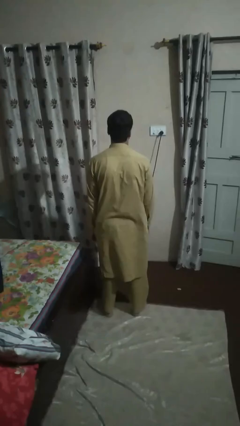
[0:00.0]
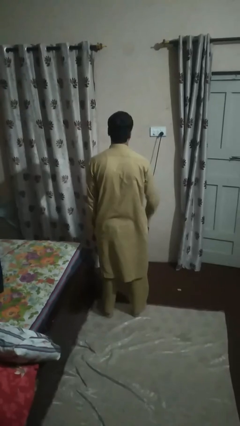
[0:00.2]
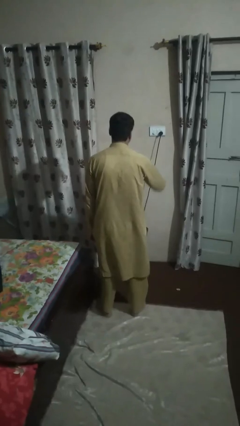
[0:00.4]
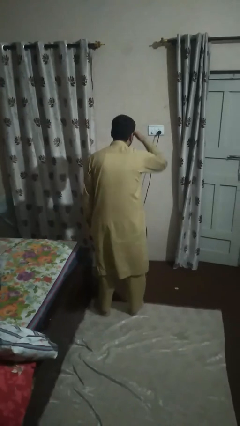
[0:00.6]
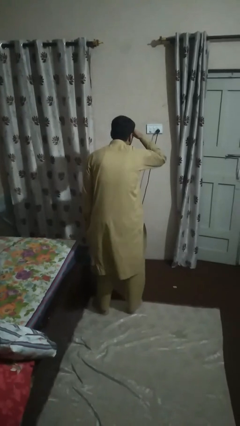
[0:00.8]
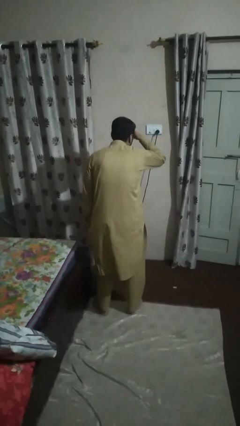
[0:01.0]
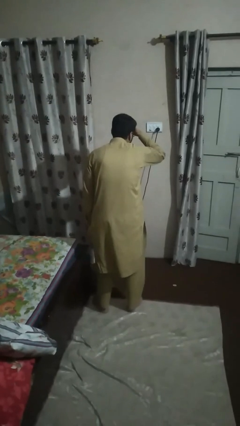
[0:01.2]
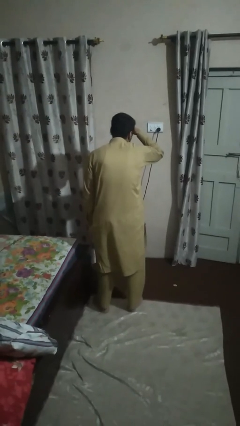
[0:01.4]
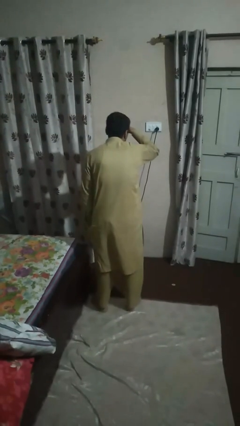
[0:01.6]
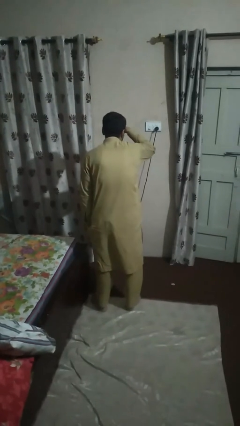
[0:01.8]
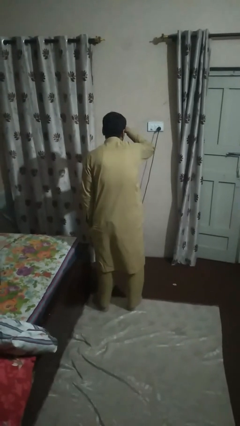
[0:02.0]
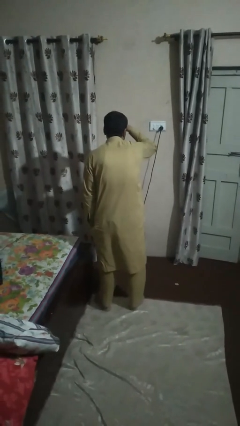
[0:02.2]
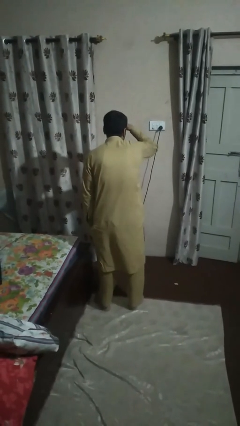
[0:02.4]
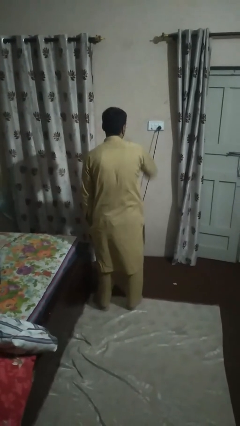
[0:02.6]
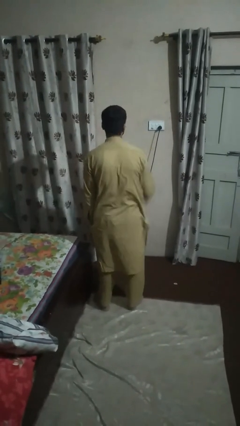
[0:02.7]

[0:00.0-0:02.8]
person shades eyes

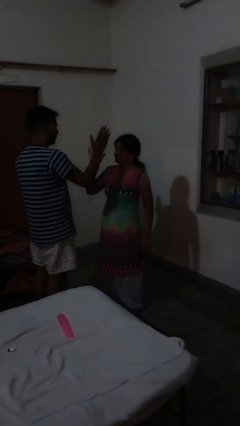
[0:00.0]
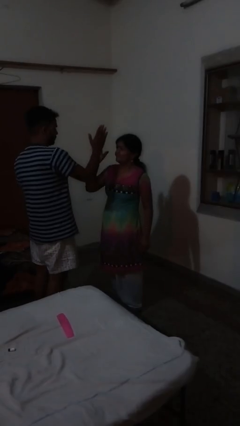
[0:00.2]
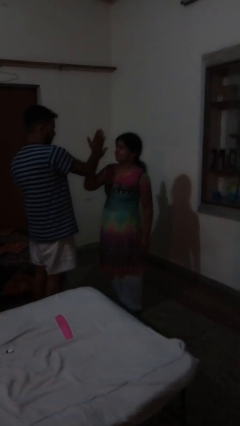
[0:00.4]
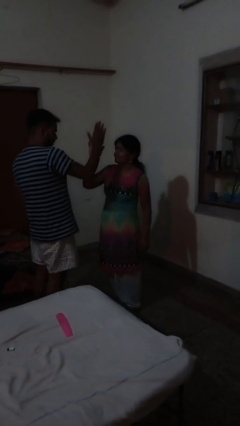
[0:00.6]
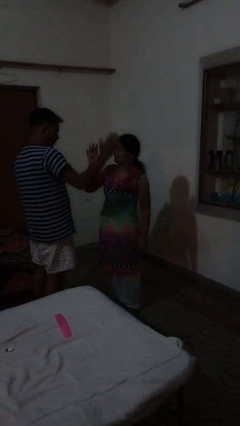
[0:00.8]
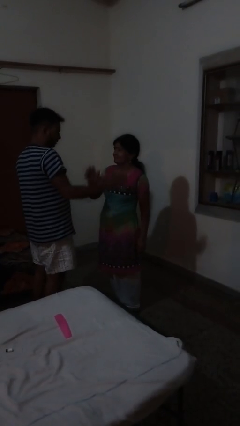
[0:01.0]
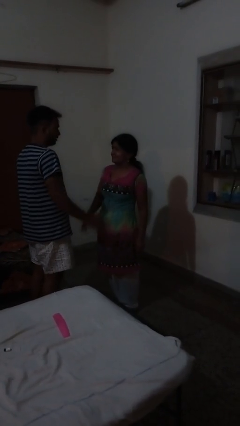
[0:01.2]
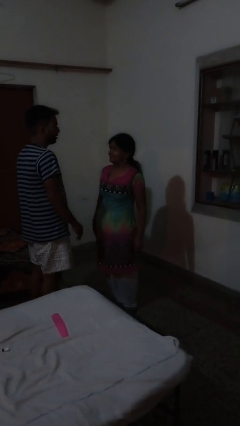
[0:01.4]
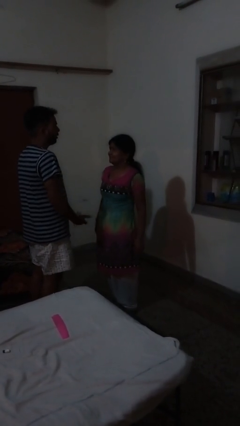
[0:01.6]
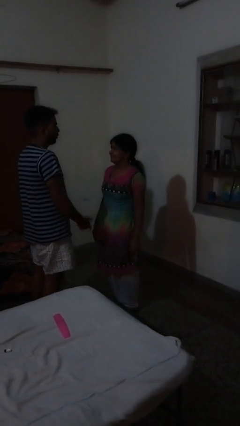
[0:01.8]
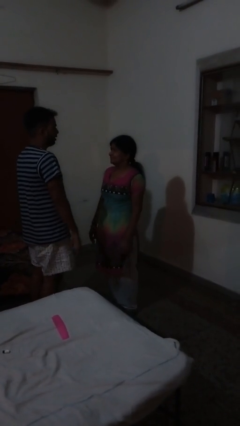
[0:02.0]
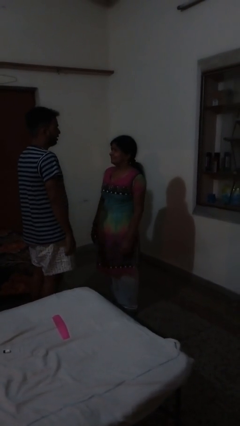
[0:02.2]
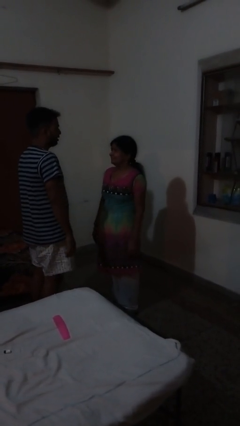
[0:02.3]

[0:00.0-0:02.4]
person highfives hand

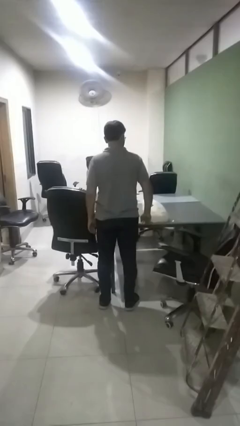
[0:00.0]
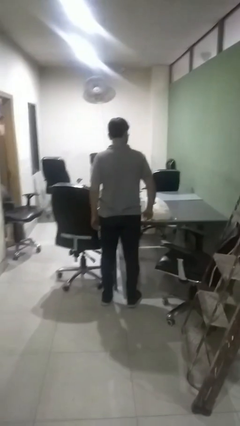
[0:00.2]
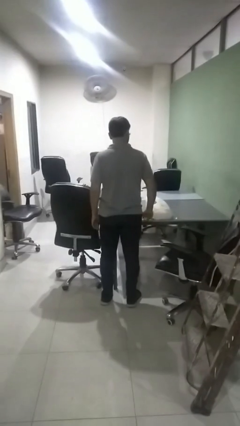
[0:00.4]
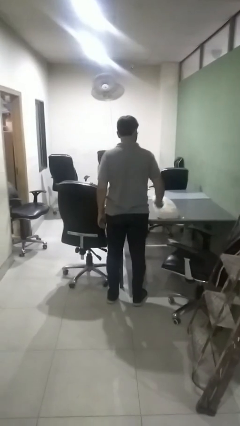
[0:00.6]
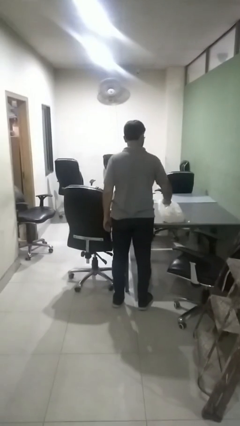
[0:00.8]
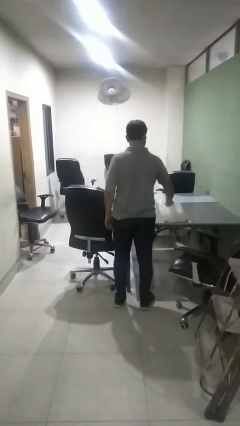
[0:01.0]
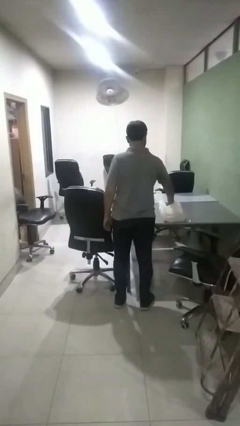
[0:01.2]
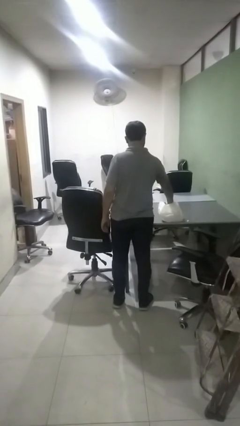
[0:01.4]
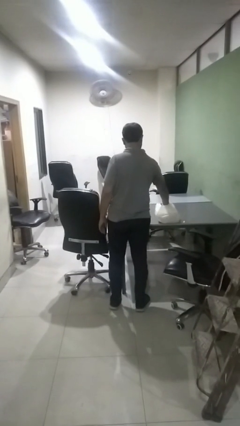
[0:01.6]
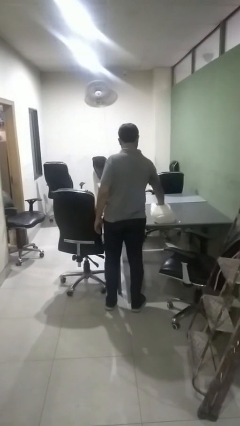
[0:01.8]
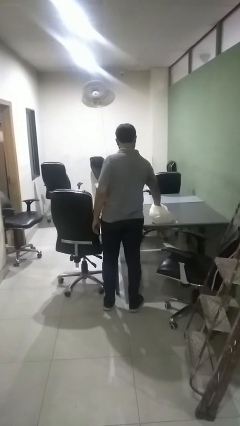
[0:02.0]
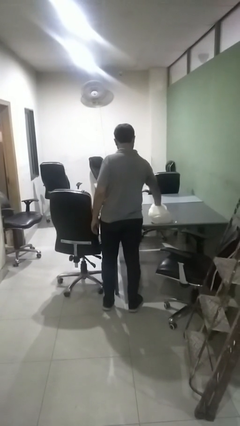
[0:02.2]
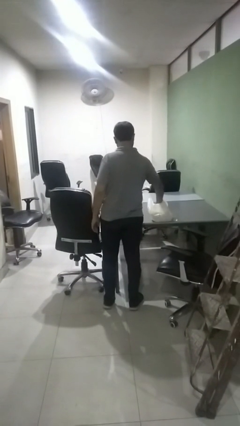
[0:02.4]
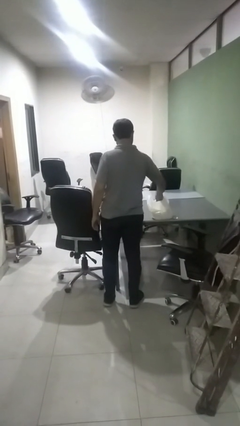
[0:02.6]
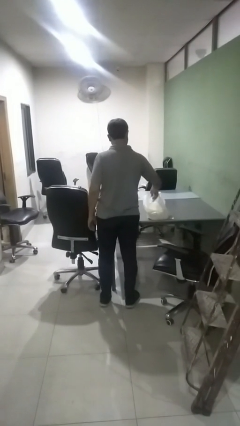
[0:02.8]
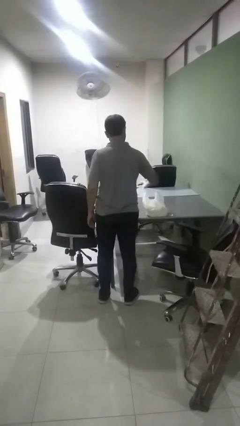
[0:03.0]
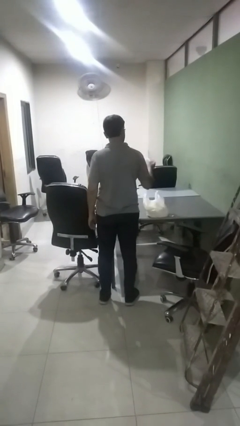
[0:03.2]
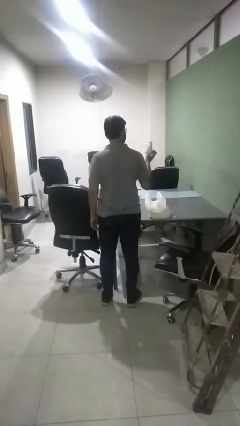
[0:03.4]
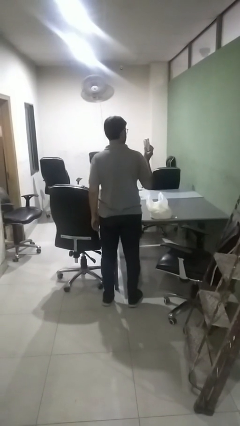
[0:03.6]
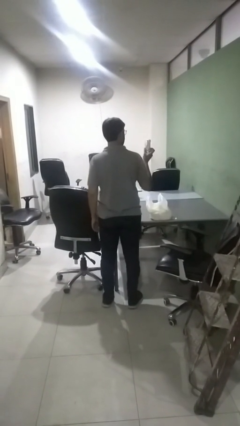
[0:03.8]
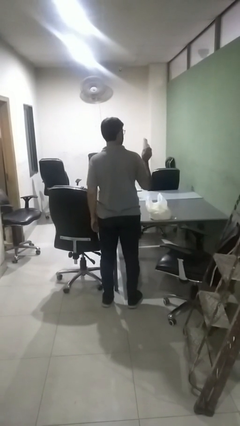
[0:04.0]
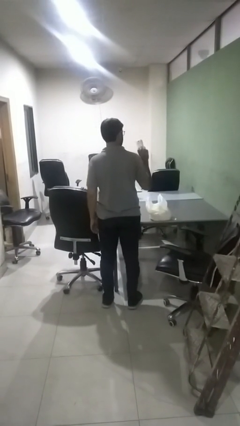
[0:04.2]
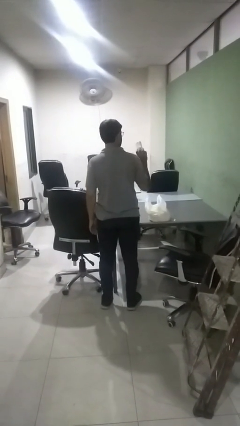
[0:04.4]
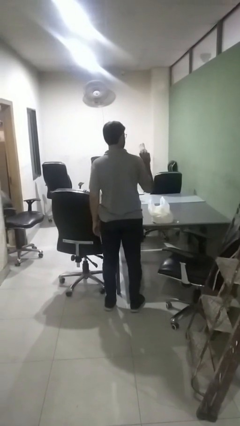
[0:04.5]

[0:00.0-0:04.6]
person takes object from bag

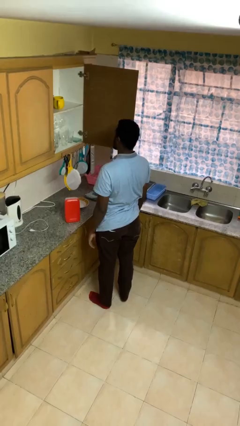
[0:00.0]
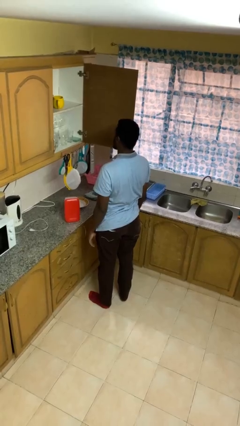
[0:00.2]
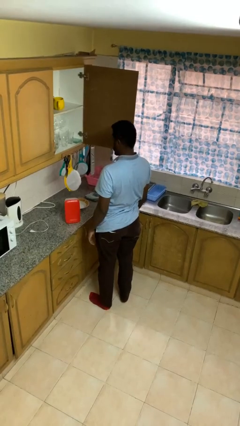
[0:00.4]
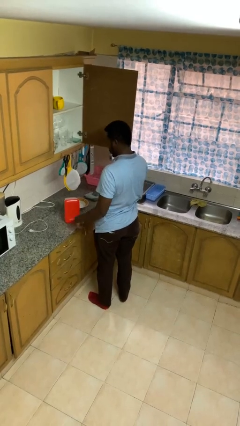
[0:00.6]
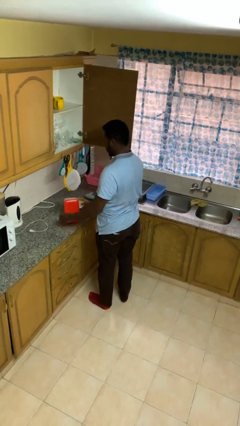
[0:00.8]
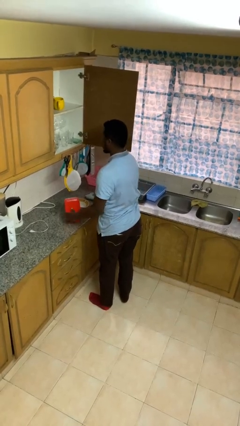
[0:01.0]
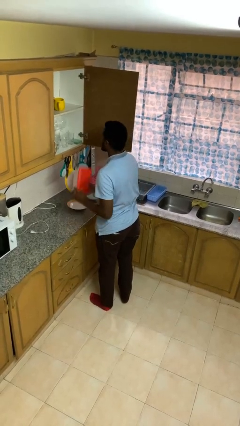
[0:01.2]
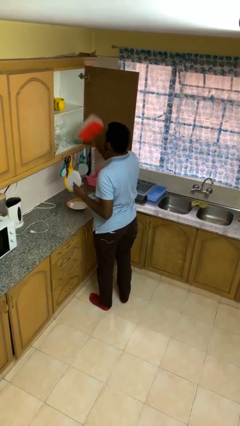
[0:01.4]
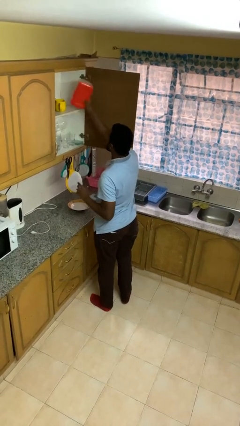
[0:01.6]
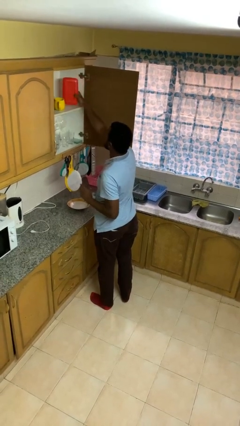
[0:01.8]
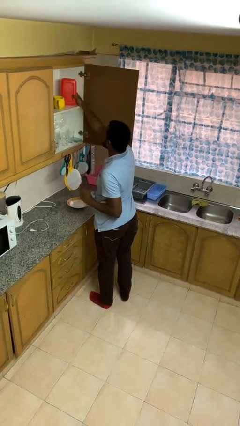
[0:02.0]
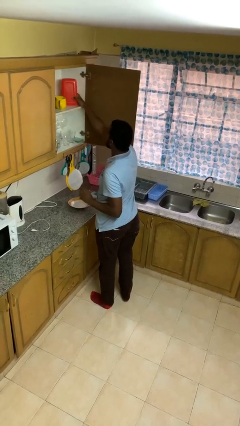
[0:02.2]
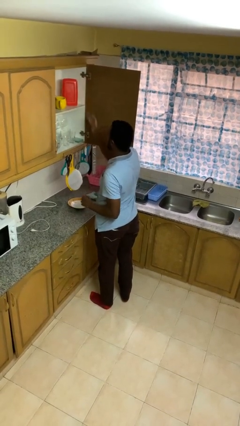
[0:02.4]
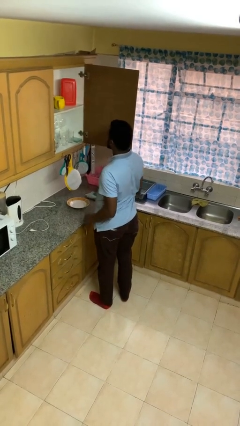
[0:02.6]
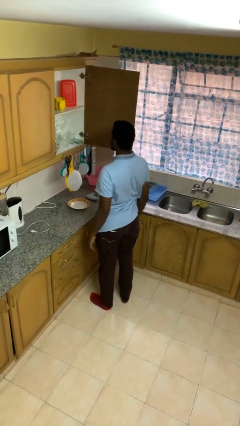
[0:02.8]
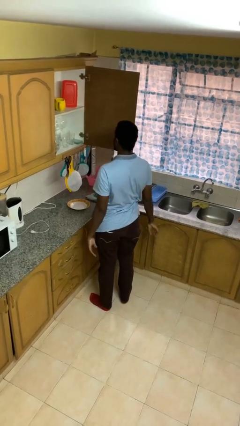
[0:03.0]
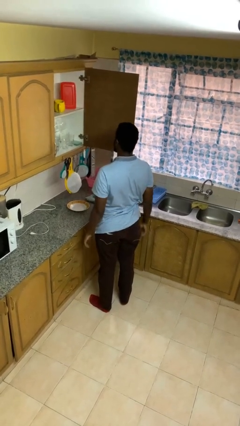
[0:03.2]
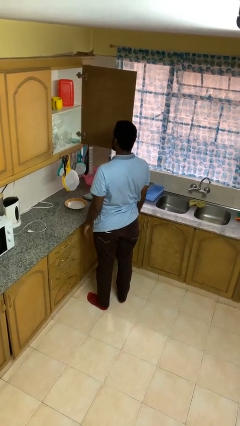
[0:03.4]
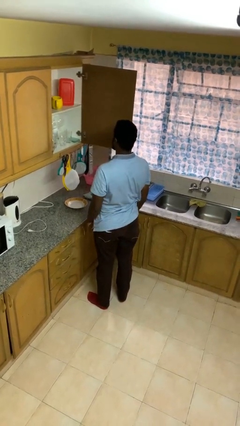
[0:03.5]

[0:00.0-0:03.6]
person puts object in cabinet

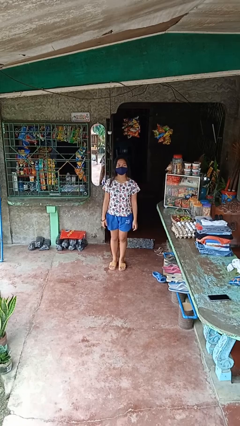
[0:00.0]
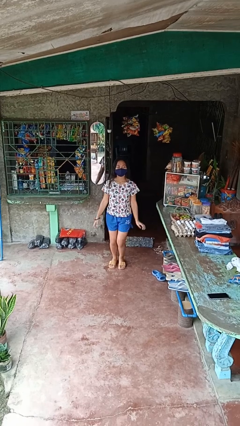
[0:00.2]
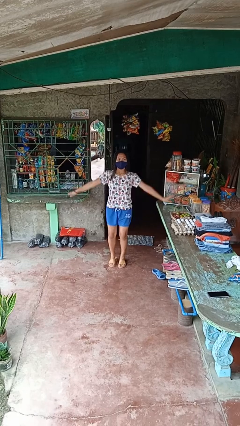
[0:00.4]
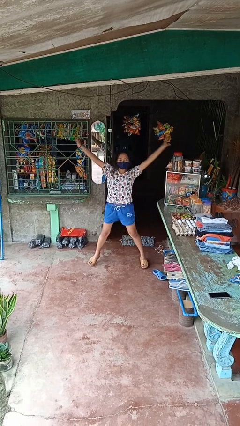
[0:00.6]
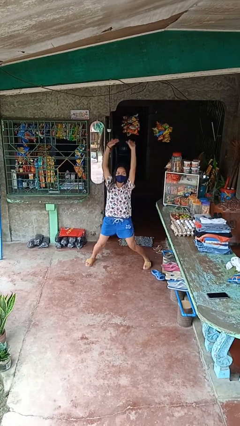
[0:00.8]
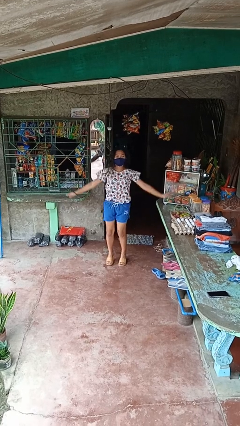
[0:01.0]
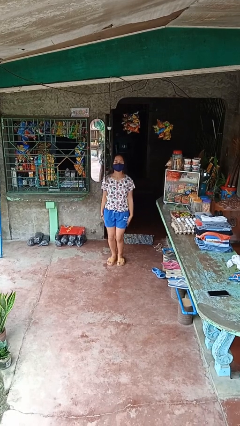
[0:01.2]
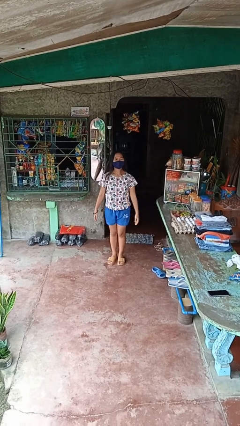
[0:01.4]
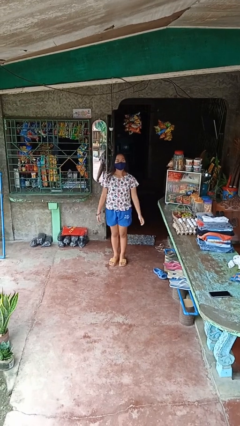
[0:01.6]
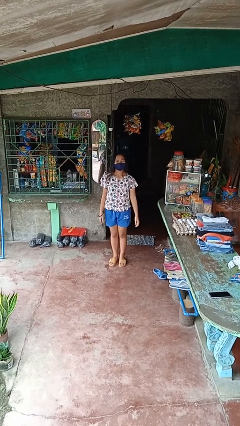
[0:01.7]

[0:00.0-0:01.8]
person exercises with jumping jacks

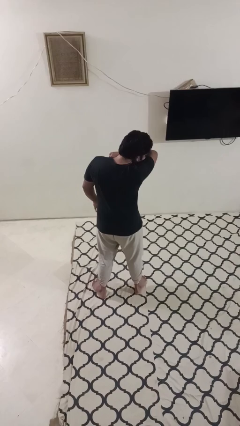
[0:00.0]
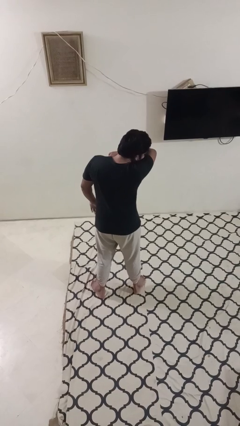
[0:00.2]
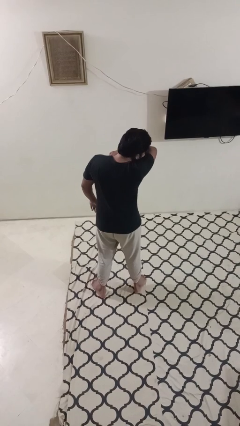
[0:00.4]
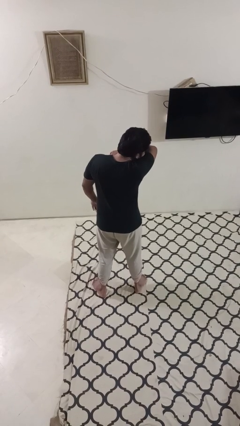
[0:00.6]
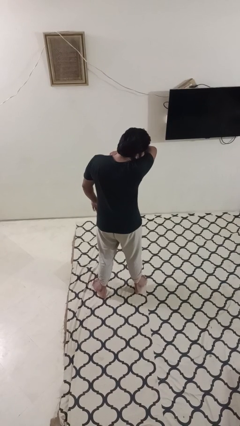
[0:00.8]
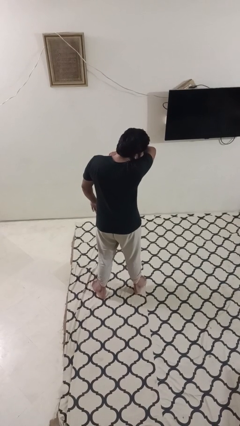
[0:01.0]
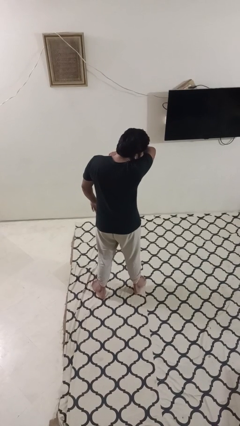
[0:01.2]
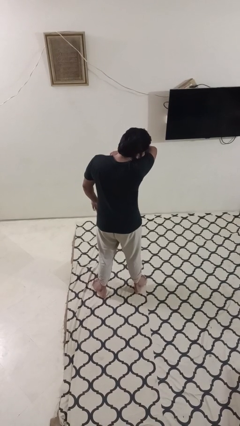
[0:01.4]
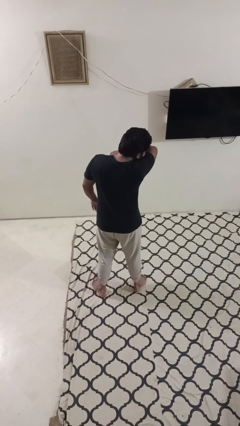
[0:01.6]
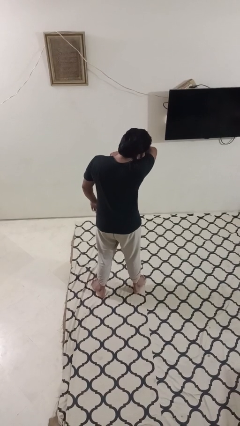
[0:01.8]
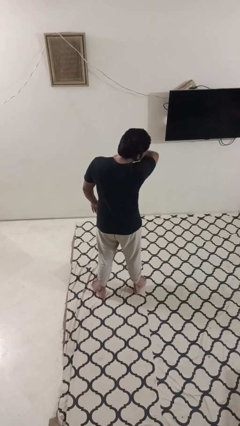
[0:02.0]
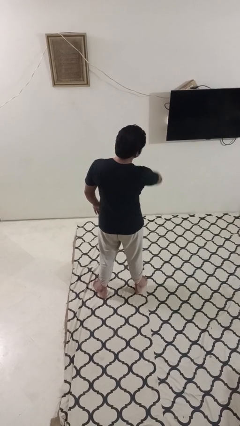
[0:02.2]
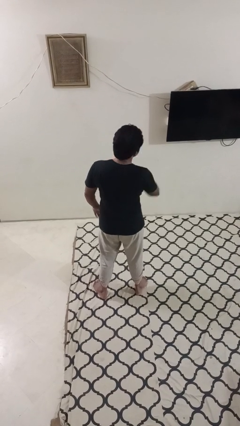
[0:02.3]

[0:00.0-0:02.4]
person sneezes into arm
